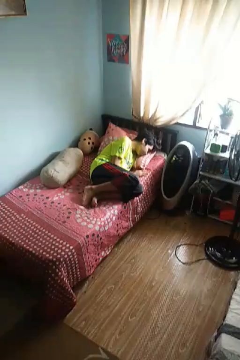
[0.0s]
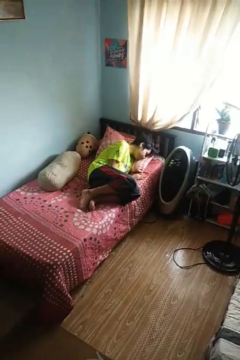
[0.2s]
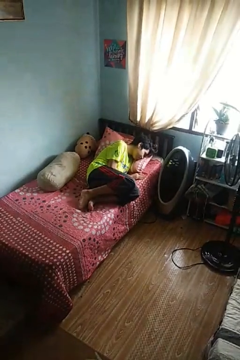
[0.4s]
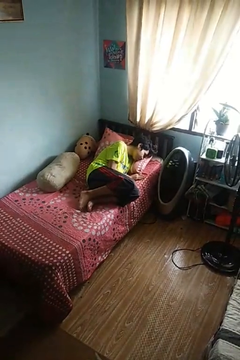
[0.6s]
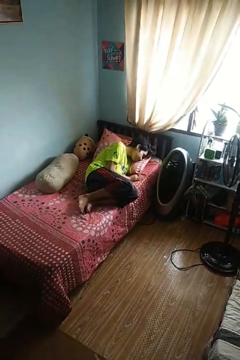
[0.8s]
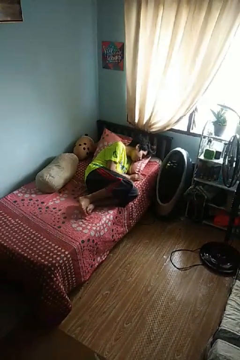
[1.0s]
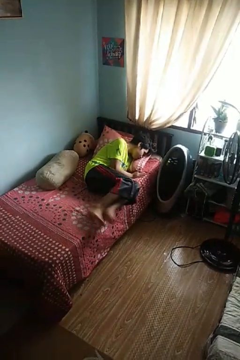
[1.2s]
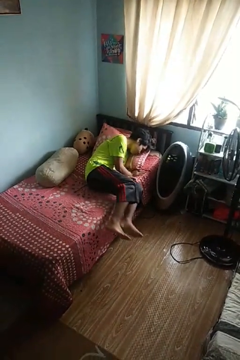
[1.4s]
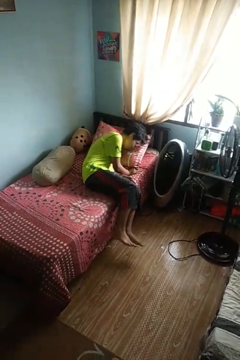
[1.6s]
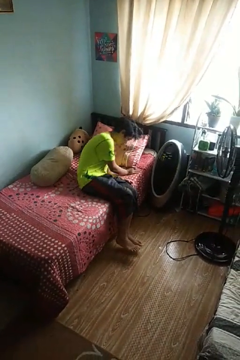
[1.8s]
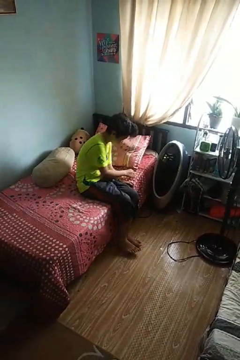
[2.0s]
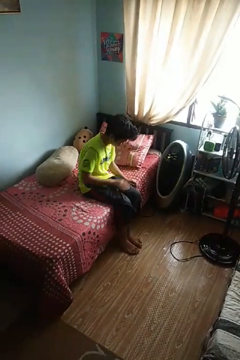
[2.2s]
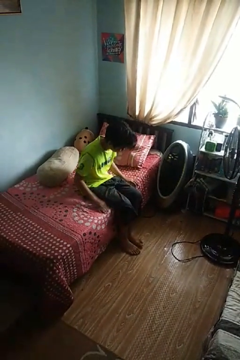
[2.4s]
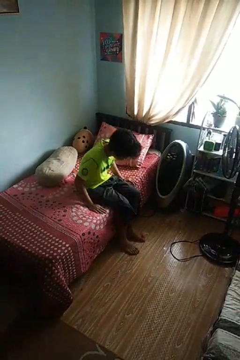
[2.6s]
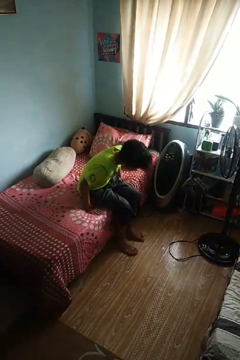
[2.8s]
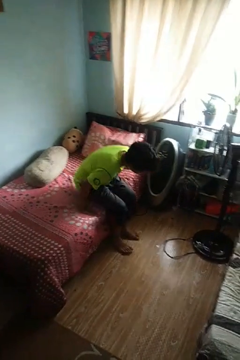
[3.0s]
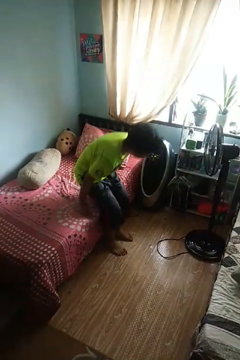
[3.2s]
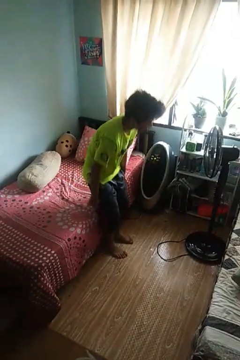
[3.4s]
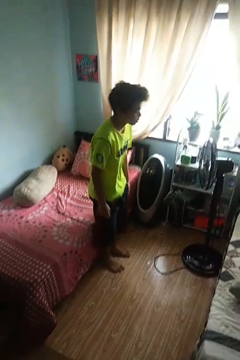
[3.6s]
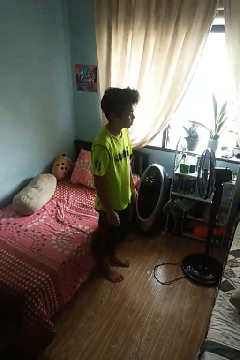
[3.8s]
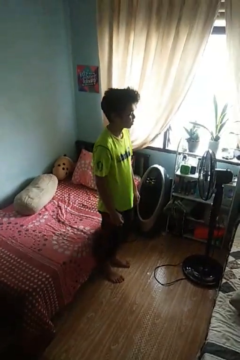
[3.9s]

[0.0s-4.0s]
person stands up

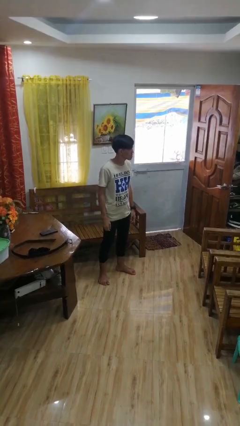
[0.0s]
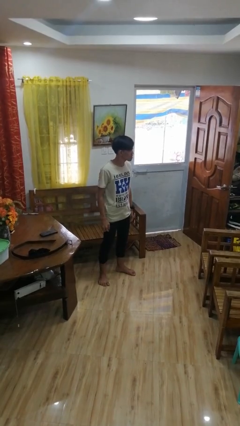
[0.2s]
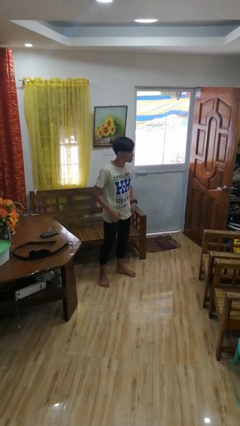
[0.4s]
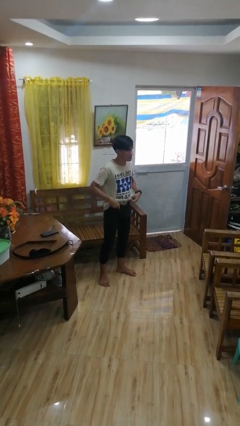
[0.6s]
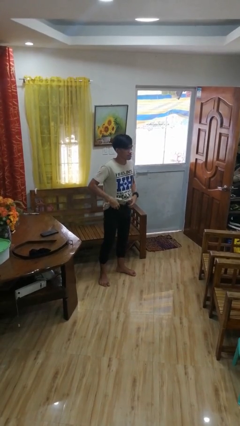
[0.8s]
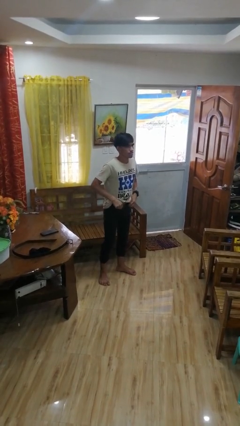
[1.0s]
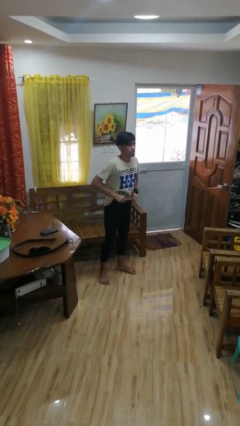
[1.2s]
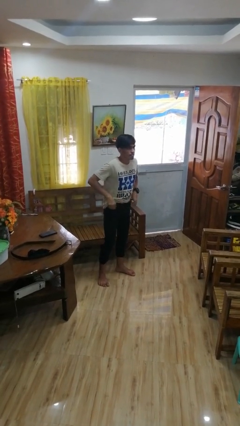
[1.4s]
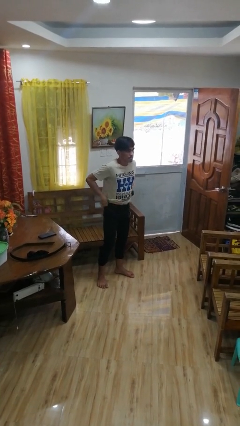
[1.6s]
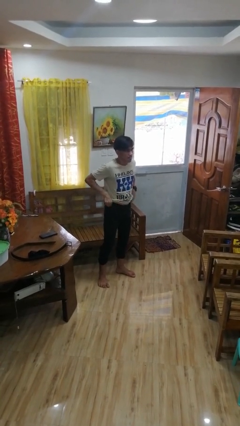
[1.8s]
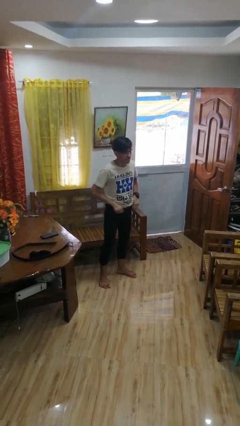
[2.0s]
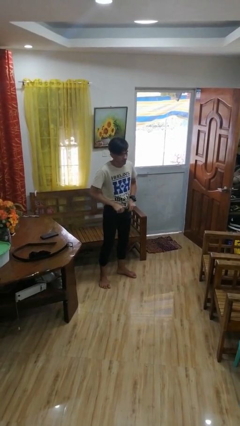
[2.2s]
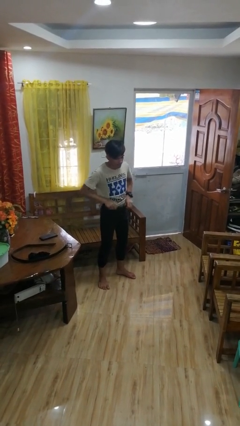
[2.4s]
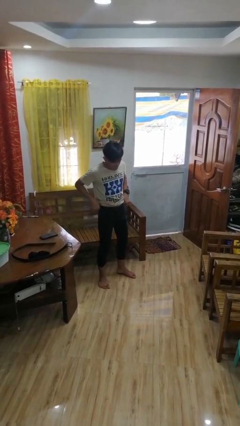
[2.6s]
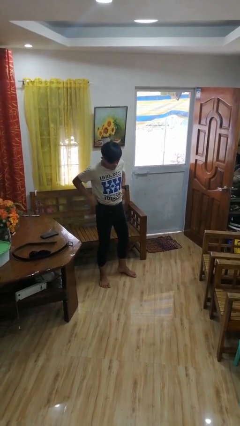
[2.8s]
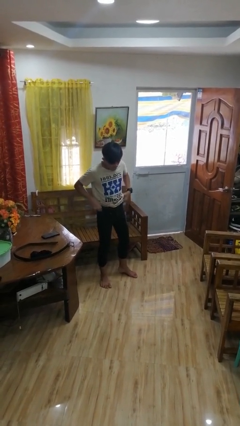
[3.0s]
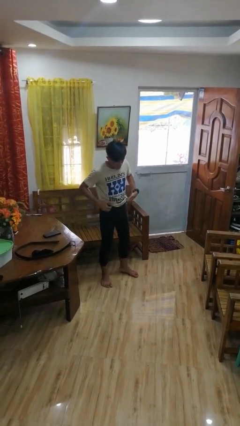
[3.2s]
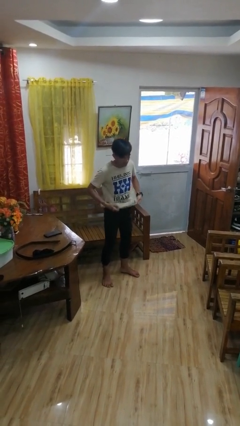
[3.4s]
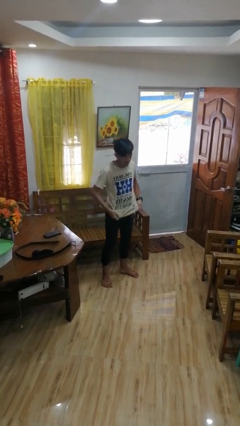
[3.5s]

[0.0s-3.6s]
person hikes up pants

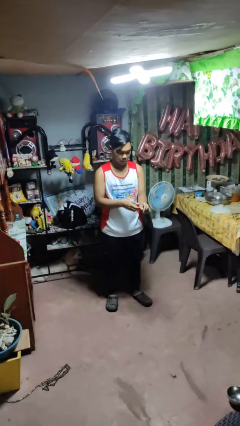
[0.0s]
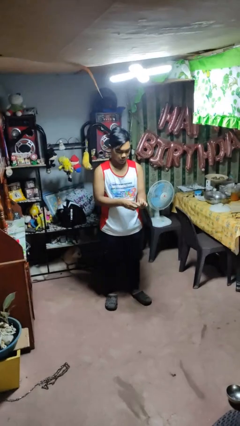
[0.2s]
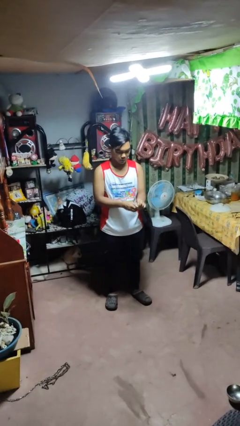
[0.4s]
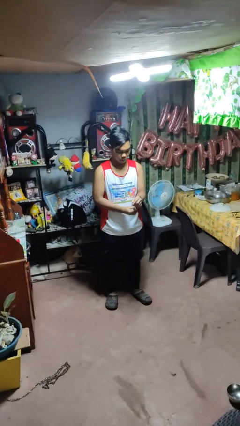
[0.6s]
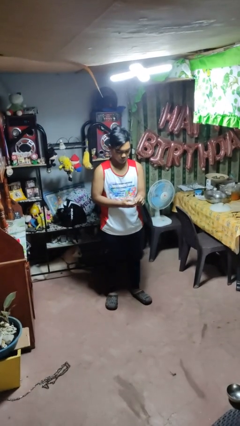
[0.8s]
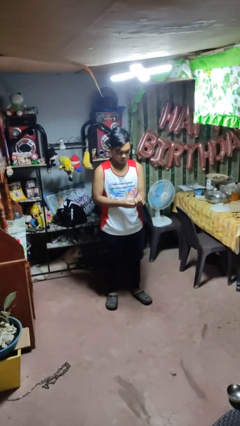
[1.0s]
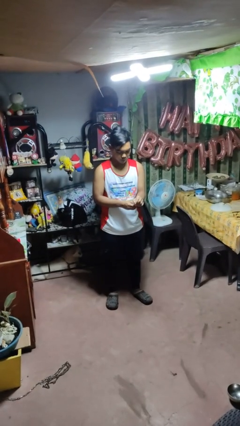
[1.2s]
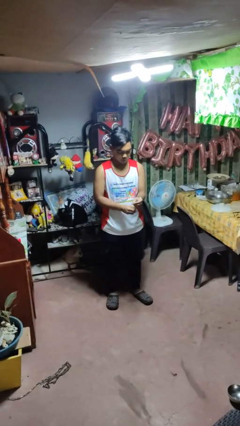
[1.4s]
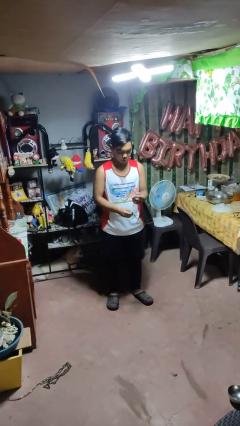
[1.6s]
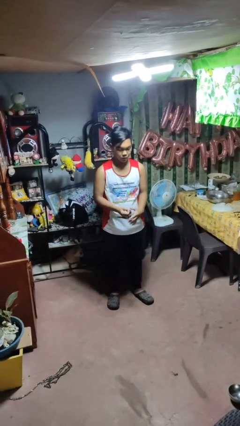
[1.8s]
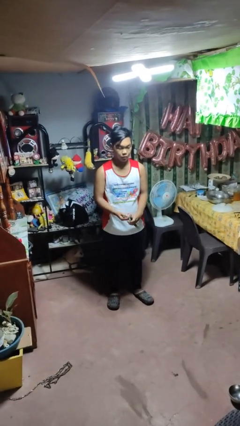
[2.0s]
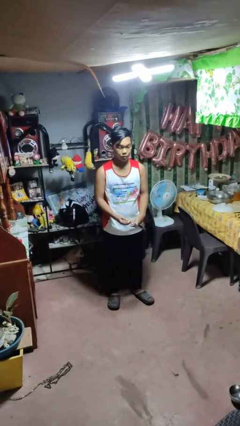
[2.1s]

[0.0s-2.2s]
person takes off wristwatch

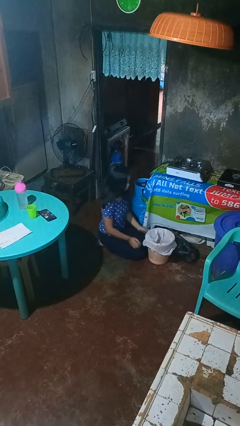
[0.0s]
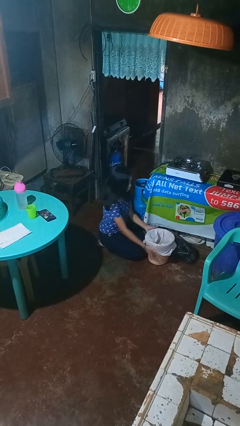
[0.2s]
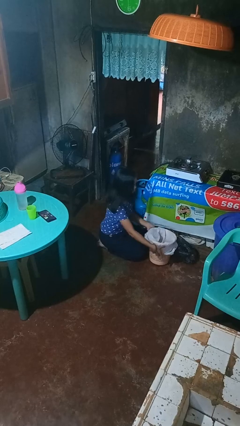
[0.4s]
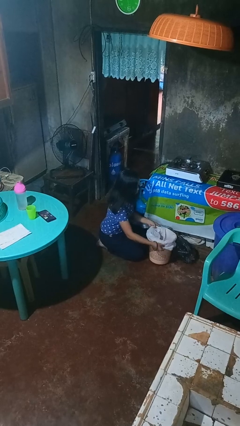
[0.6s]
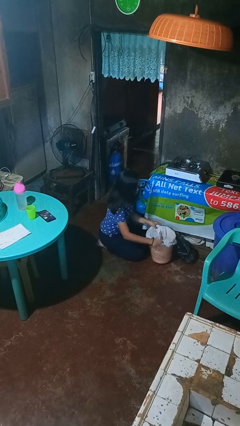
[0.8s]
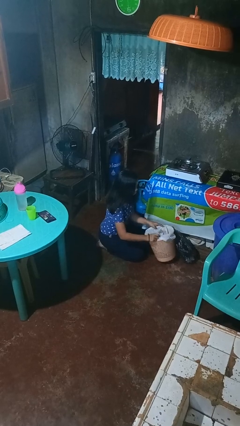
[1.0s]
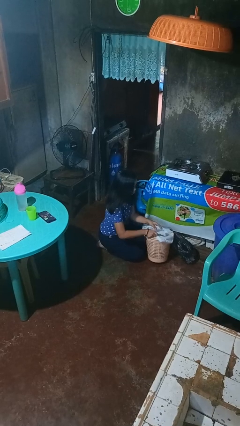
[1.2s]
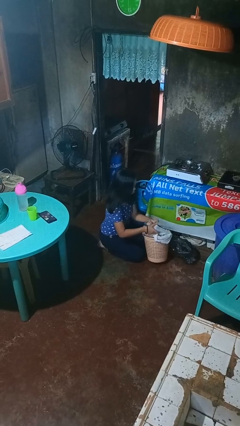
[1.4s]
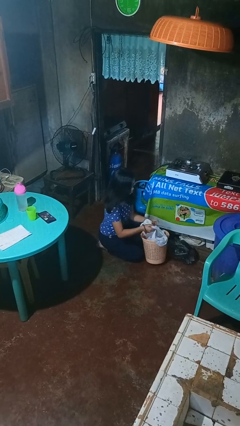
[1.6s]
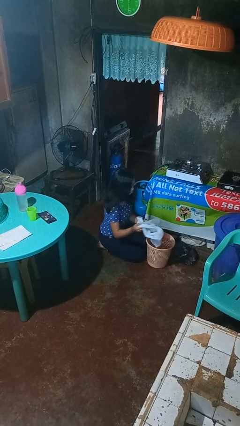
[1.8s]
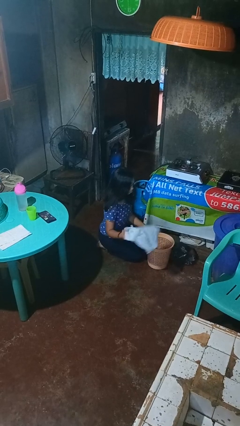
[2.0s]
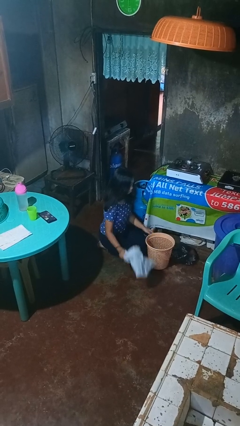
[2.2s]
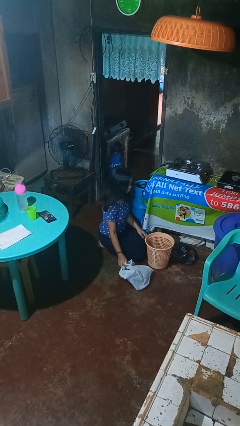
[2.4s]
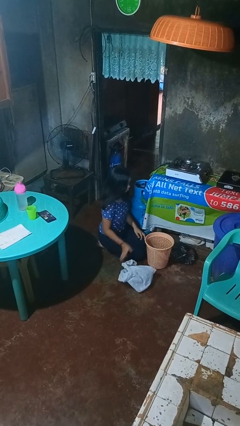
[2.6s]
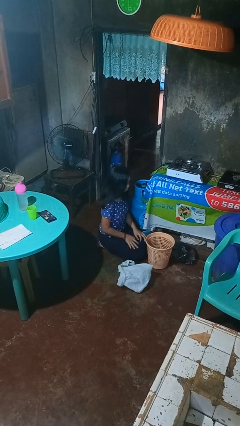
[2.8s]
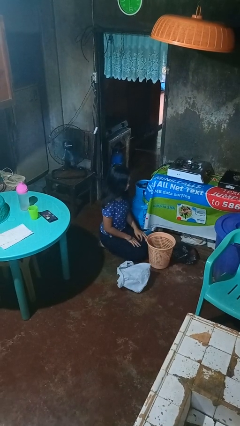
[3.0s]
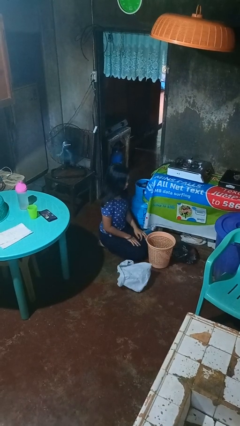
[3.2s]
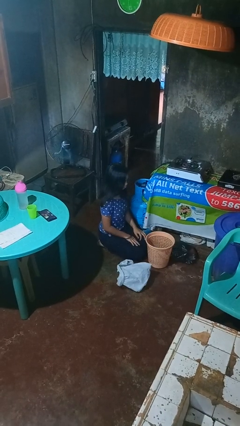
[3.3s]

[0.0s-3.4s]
person removes trashbag from trashcan

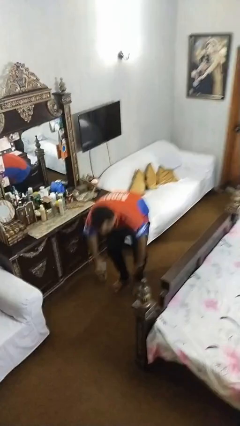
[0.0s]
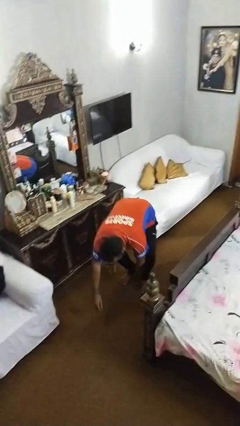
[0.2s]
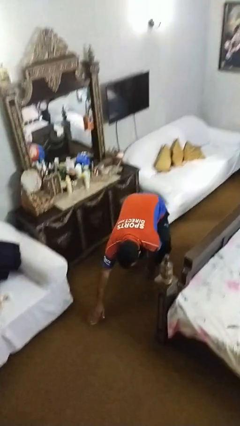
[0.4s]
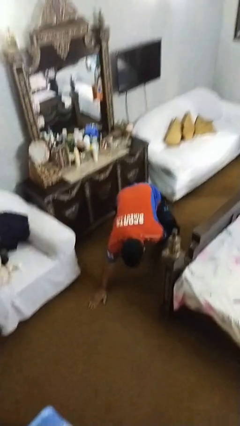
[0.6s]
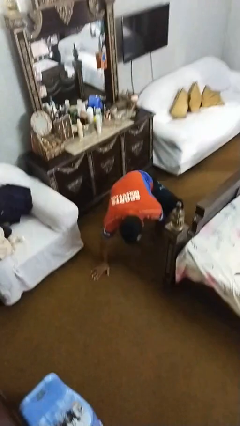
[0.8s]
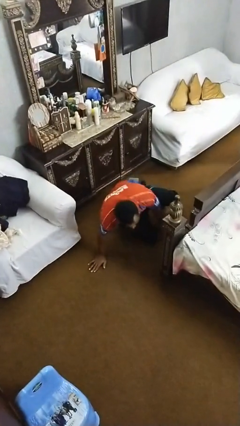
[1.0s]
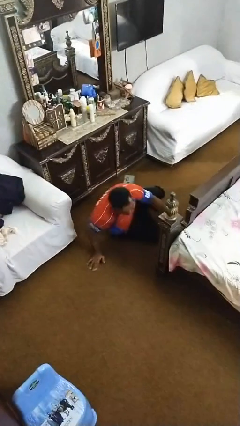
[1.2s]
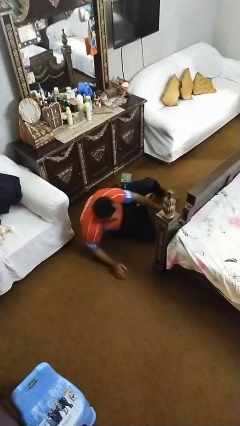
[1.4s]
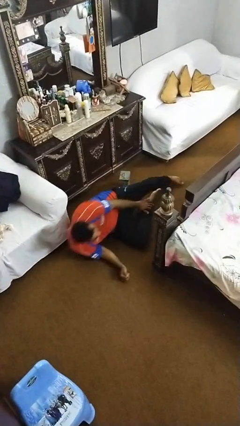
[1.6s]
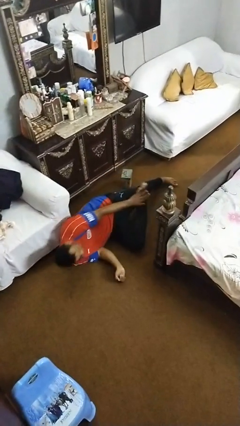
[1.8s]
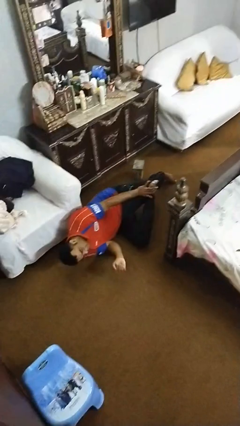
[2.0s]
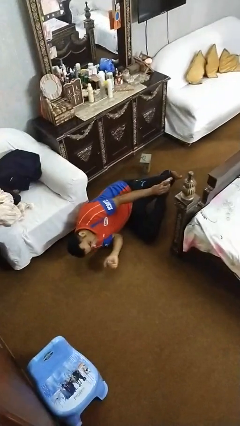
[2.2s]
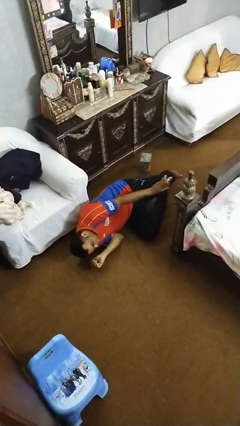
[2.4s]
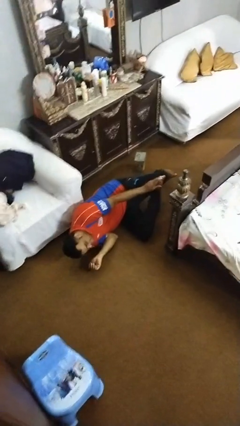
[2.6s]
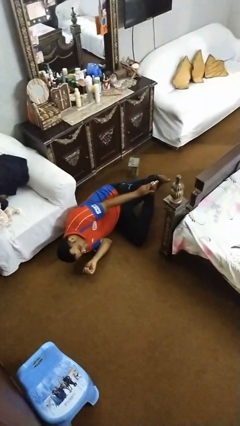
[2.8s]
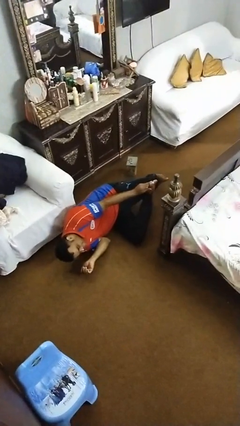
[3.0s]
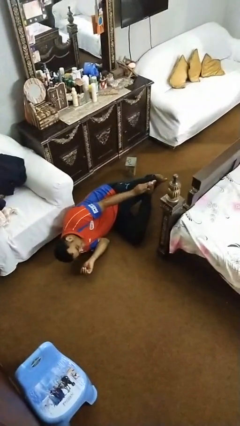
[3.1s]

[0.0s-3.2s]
person lies down on floor

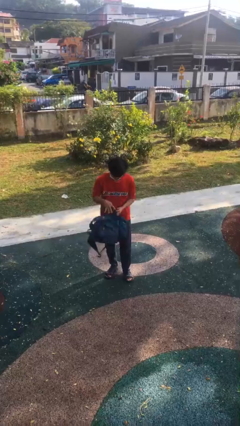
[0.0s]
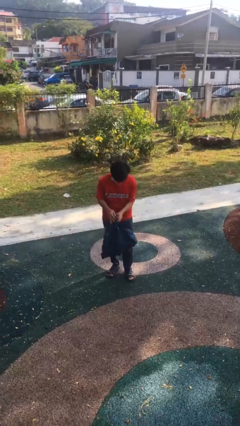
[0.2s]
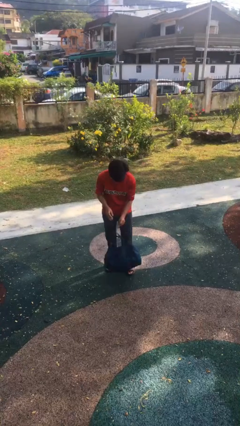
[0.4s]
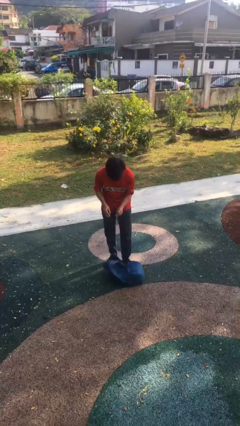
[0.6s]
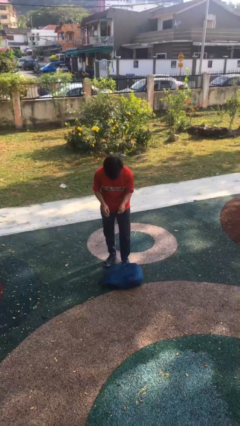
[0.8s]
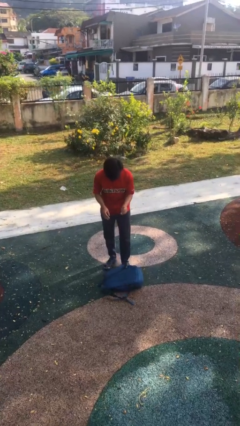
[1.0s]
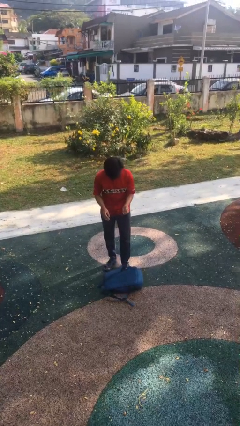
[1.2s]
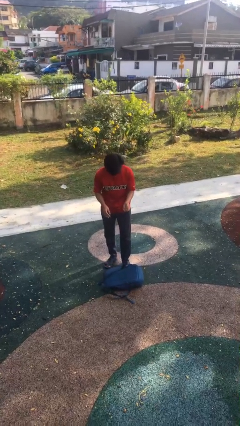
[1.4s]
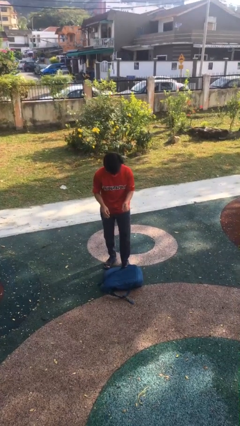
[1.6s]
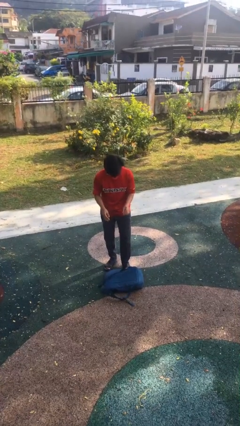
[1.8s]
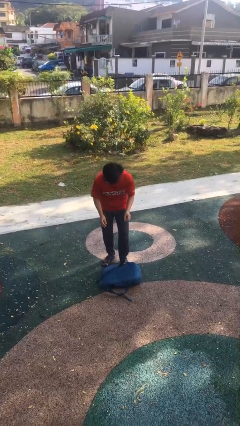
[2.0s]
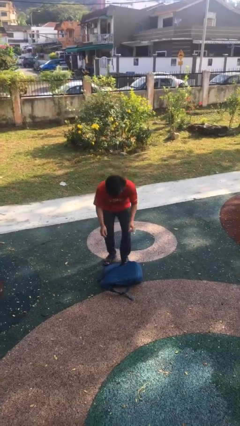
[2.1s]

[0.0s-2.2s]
person drops object
